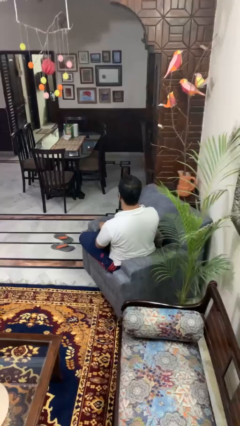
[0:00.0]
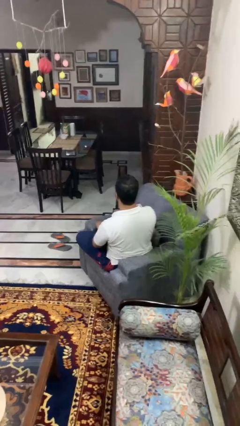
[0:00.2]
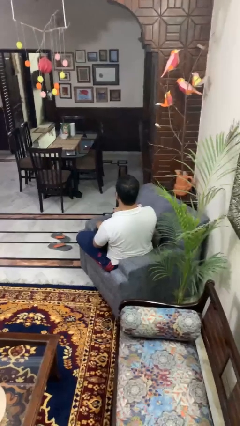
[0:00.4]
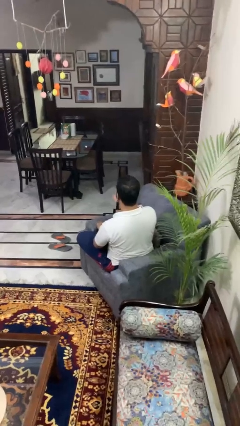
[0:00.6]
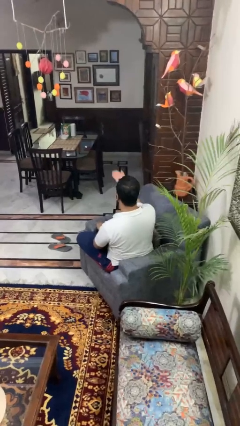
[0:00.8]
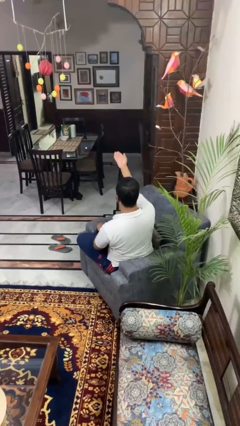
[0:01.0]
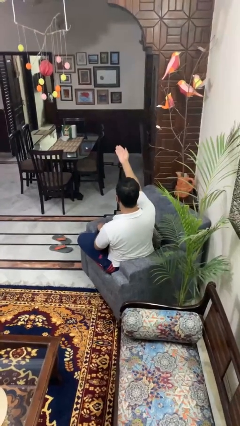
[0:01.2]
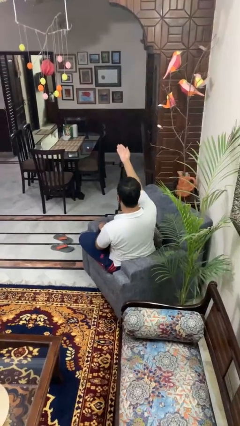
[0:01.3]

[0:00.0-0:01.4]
person gestures swipe up

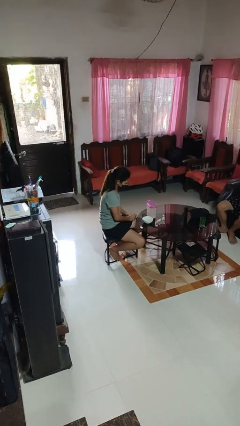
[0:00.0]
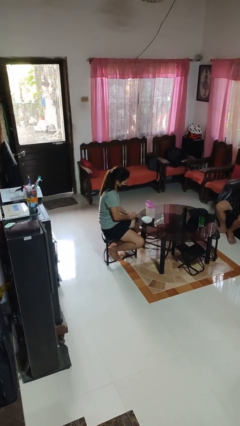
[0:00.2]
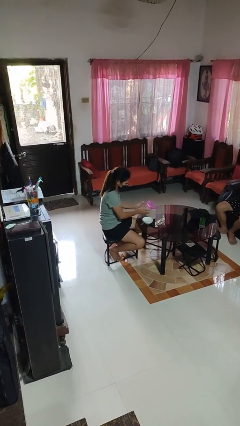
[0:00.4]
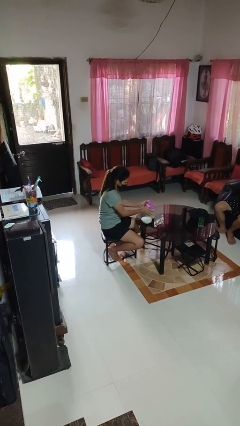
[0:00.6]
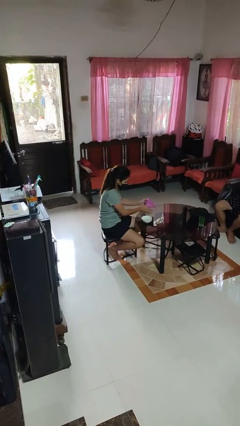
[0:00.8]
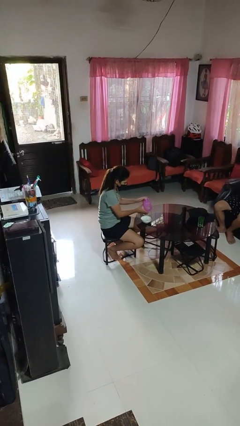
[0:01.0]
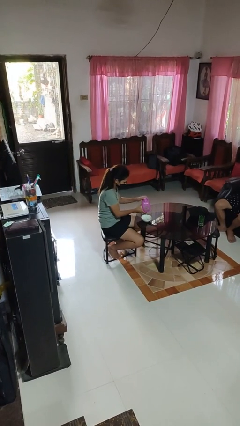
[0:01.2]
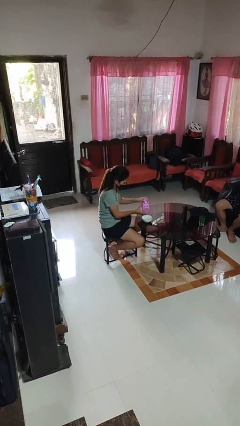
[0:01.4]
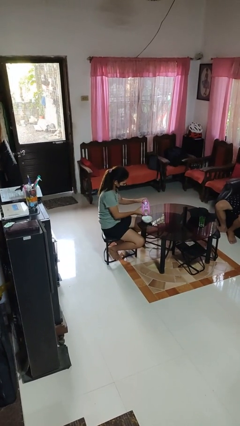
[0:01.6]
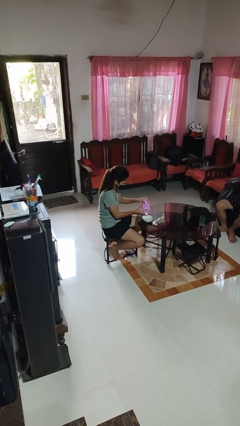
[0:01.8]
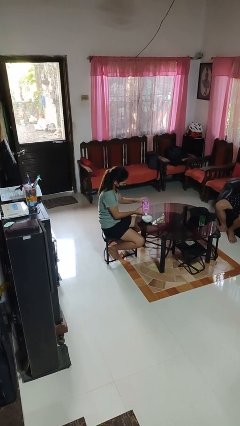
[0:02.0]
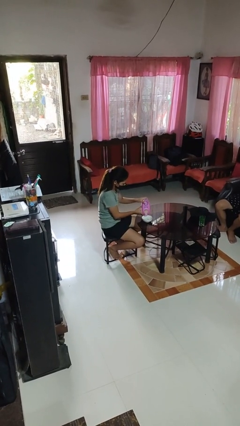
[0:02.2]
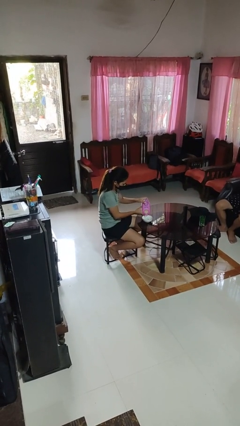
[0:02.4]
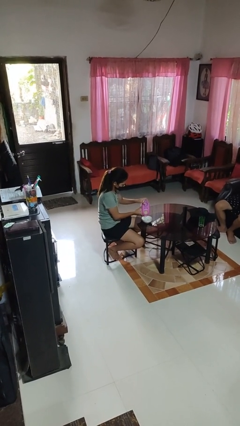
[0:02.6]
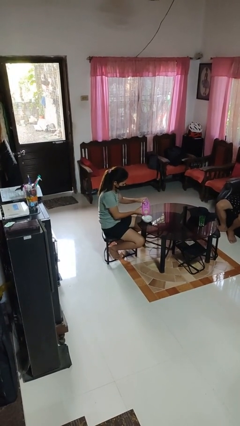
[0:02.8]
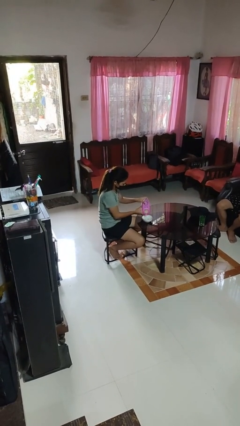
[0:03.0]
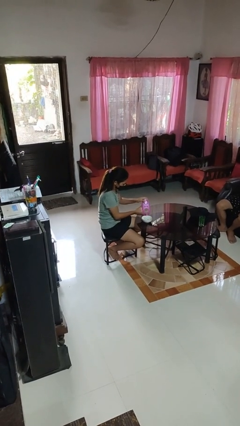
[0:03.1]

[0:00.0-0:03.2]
person pours into bowl

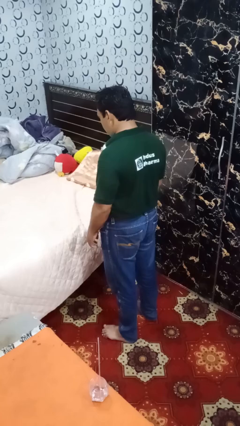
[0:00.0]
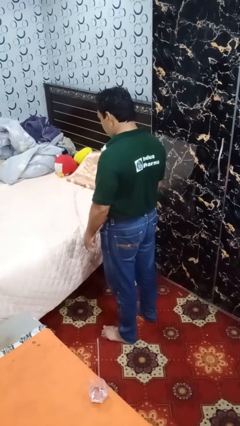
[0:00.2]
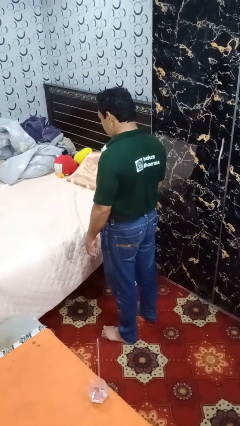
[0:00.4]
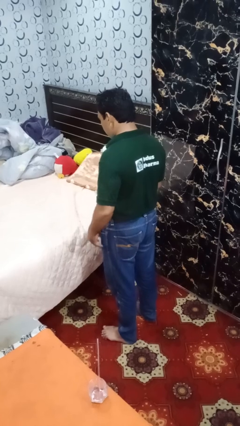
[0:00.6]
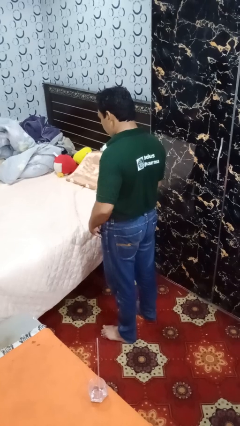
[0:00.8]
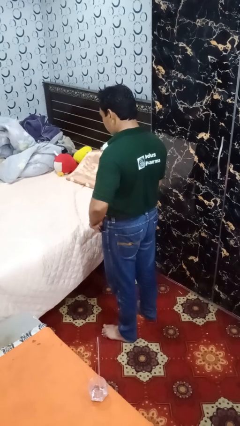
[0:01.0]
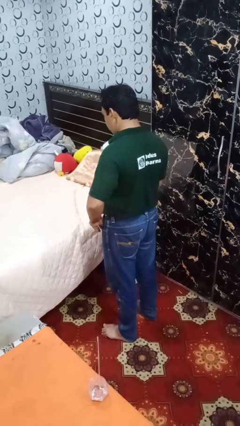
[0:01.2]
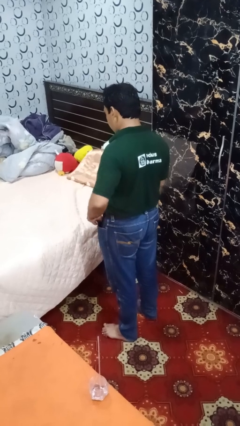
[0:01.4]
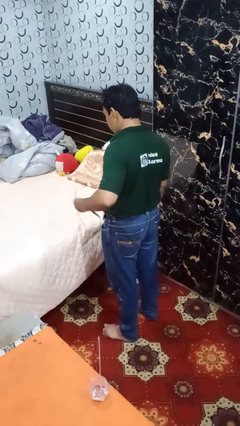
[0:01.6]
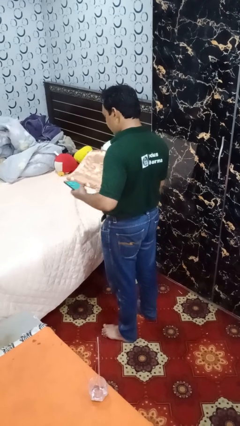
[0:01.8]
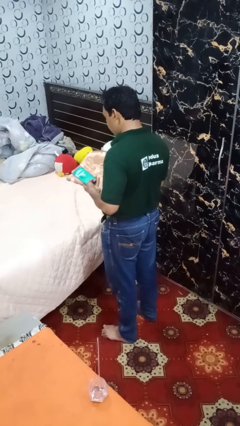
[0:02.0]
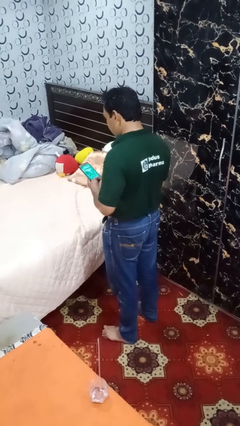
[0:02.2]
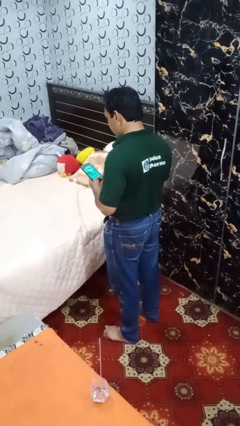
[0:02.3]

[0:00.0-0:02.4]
person takes phone from pocket

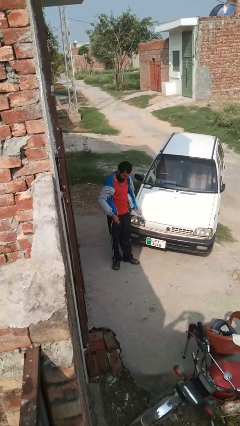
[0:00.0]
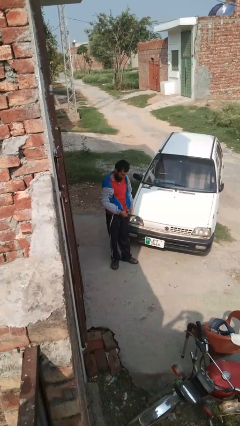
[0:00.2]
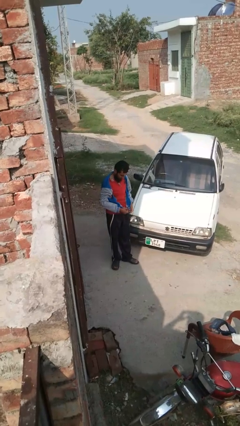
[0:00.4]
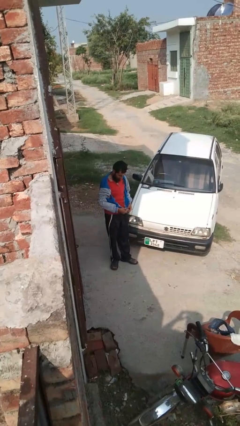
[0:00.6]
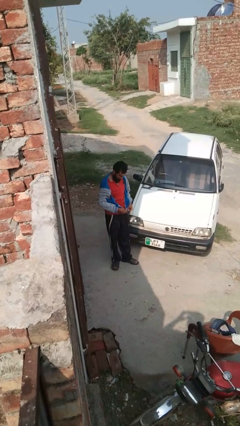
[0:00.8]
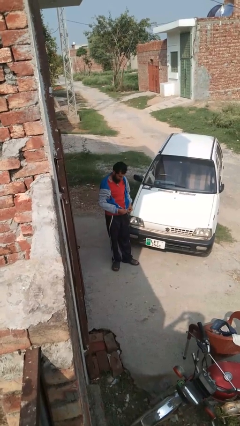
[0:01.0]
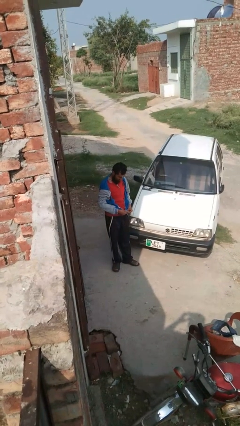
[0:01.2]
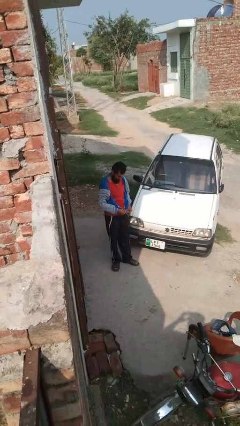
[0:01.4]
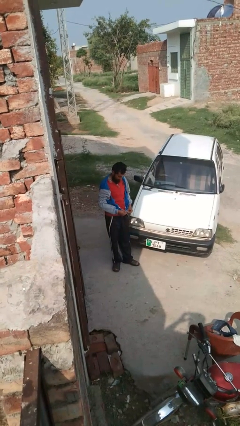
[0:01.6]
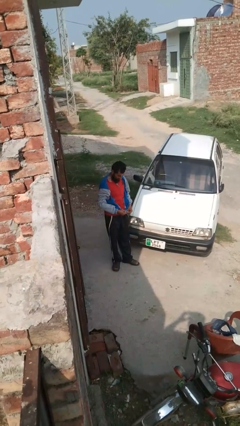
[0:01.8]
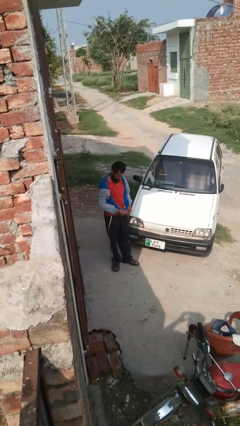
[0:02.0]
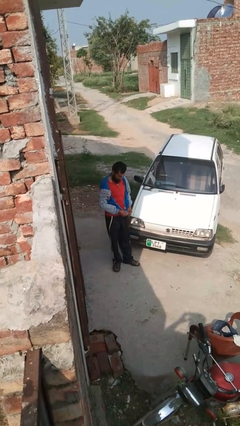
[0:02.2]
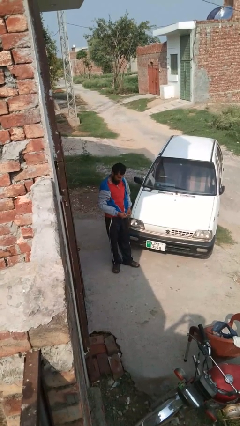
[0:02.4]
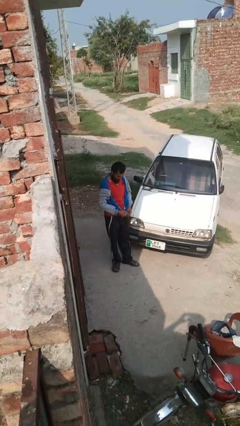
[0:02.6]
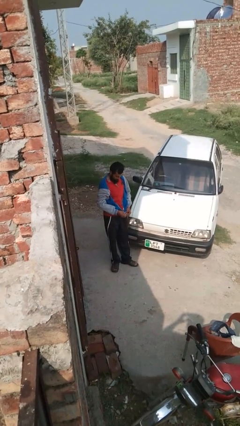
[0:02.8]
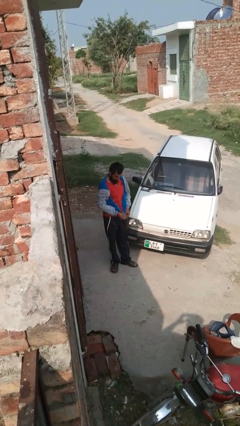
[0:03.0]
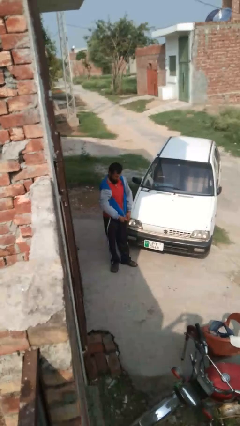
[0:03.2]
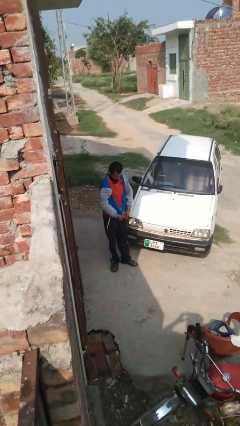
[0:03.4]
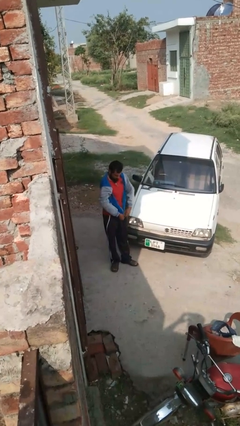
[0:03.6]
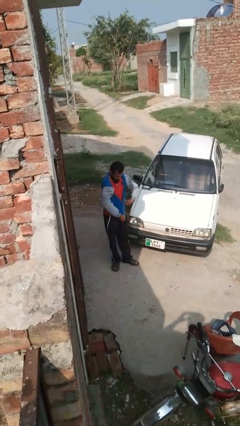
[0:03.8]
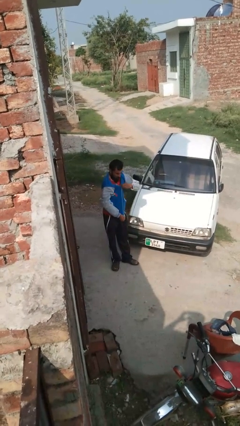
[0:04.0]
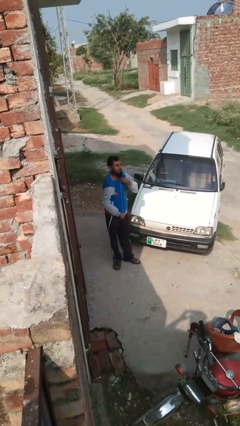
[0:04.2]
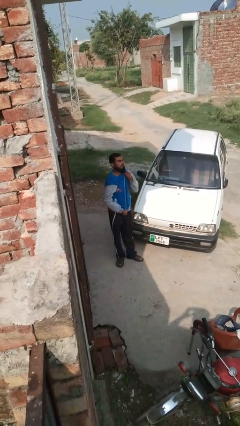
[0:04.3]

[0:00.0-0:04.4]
person zips up jacket

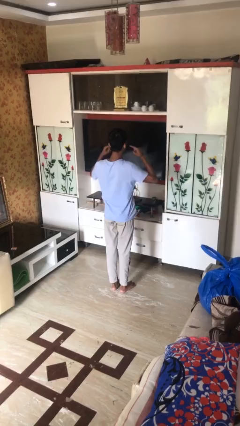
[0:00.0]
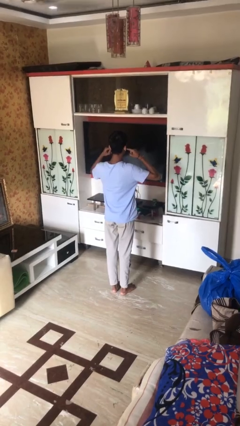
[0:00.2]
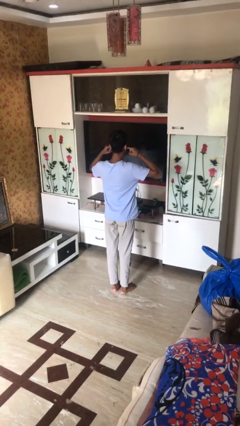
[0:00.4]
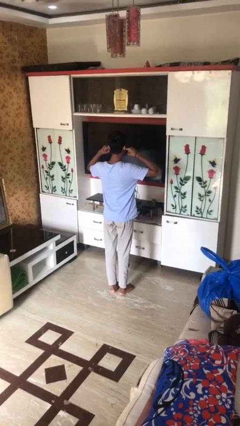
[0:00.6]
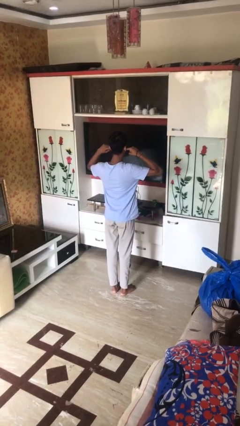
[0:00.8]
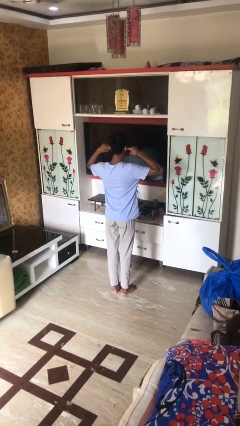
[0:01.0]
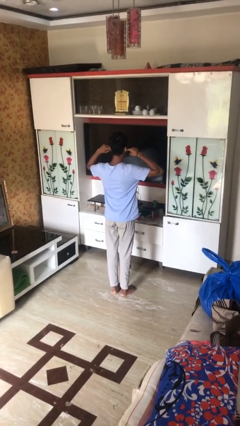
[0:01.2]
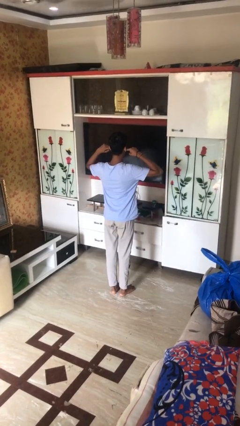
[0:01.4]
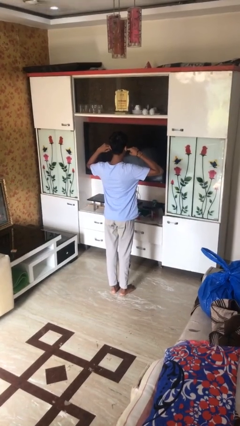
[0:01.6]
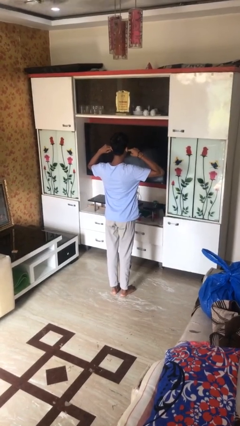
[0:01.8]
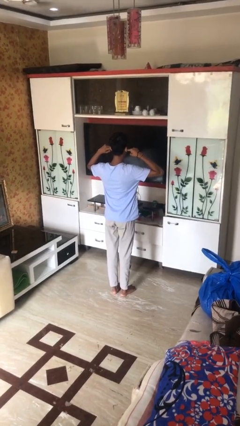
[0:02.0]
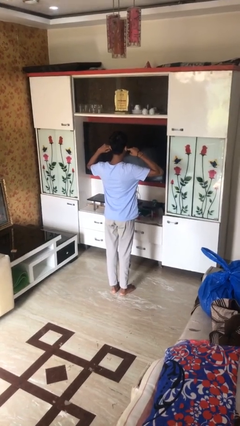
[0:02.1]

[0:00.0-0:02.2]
person puts fingers in ear

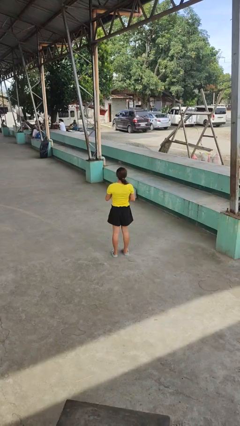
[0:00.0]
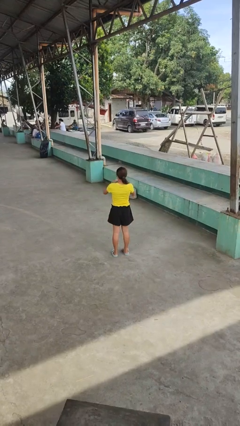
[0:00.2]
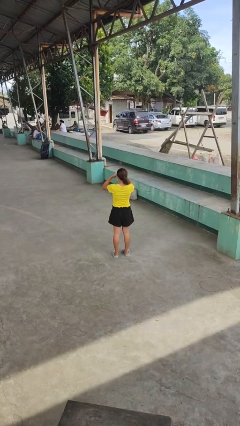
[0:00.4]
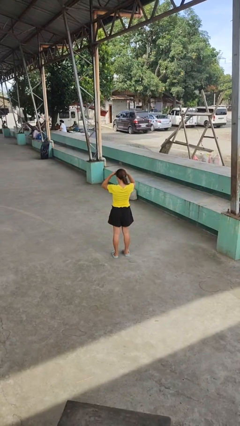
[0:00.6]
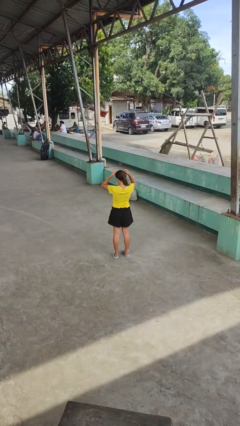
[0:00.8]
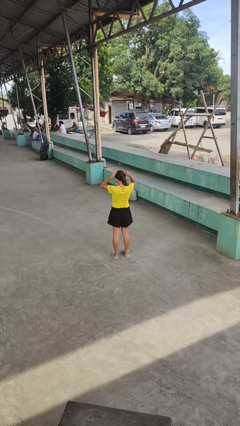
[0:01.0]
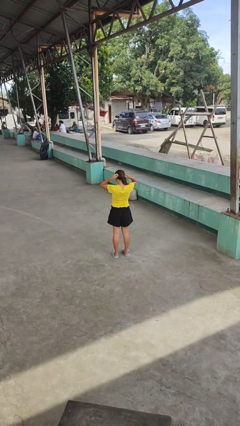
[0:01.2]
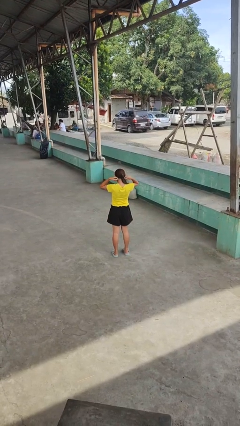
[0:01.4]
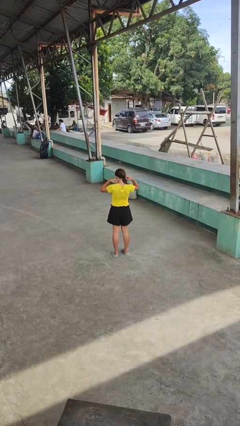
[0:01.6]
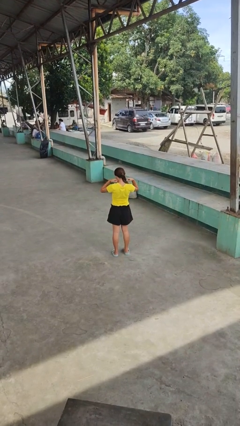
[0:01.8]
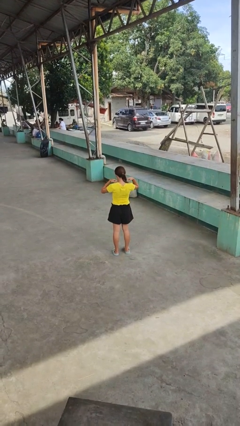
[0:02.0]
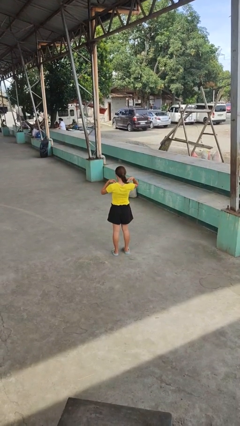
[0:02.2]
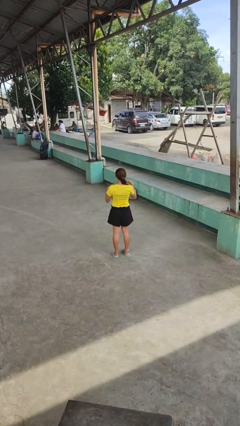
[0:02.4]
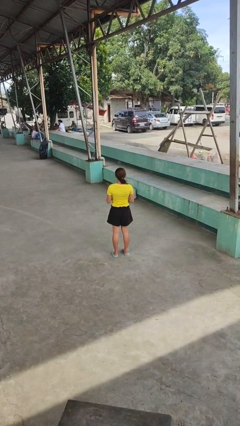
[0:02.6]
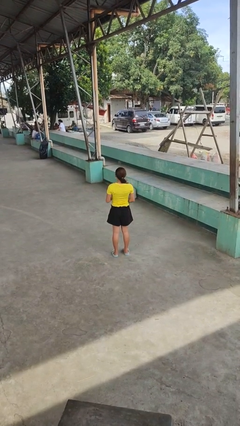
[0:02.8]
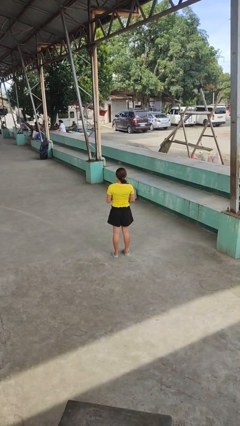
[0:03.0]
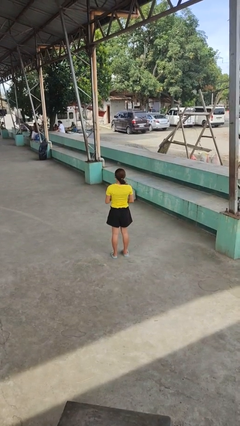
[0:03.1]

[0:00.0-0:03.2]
person puts on necklace

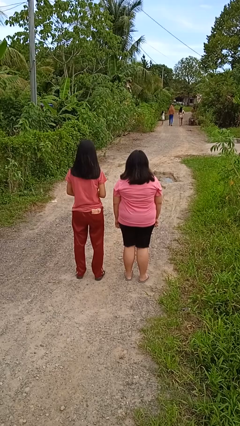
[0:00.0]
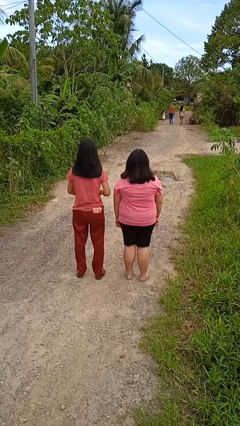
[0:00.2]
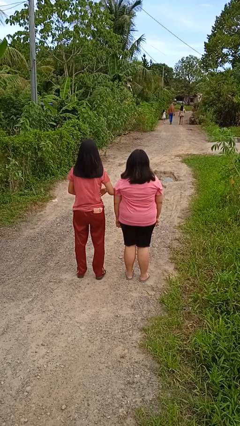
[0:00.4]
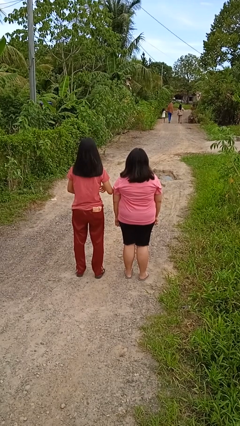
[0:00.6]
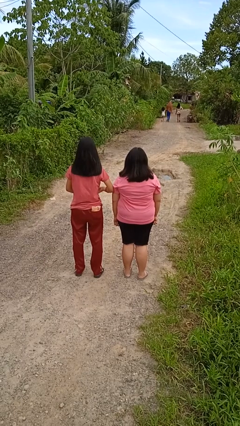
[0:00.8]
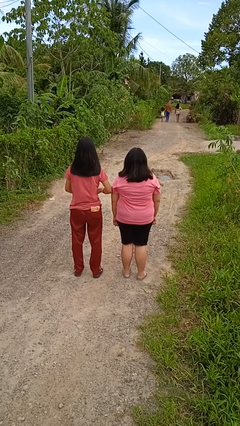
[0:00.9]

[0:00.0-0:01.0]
person nudges person with elbow
